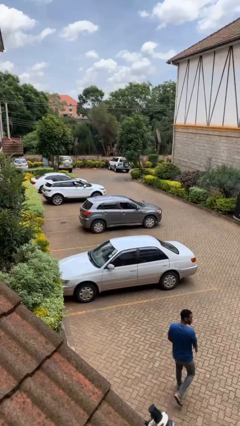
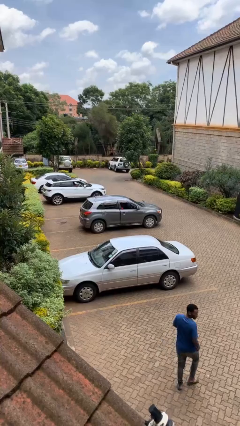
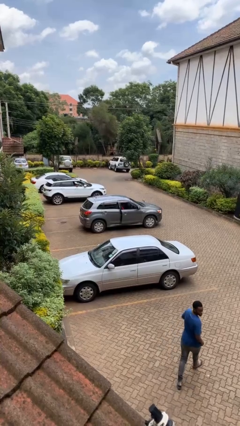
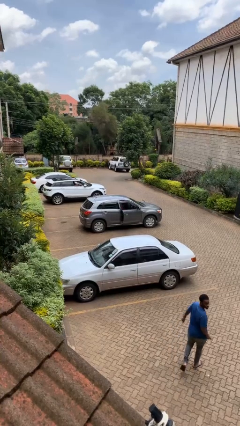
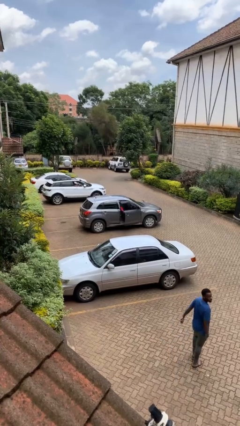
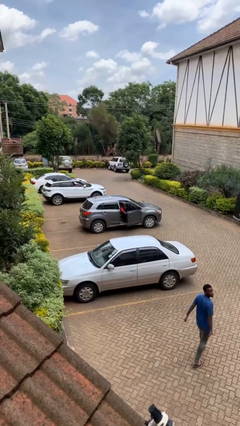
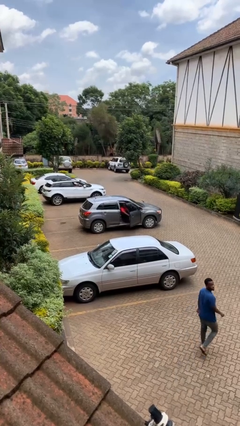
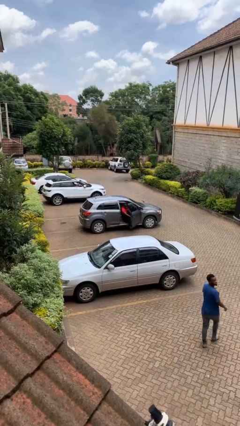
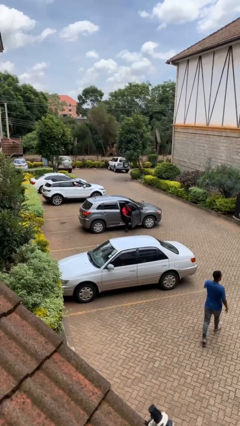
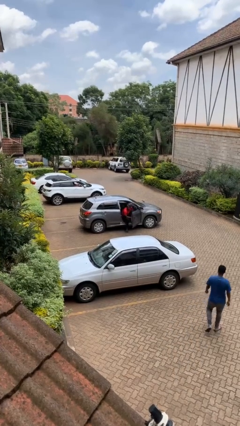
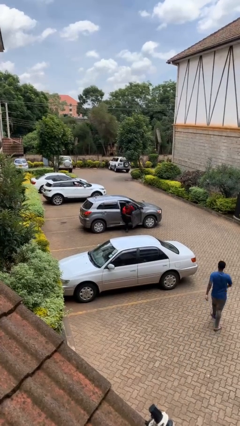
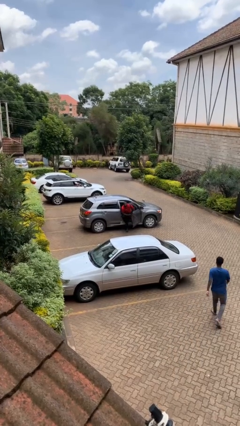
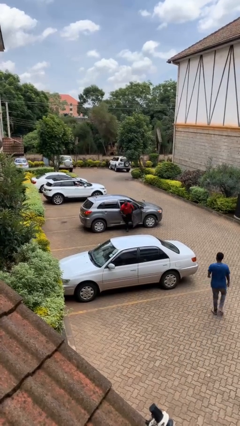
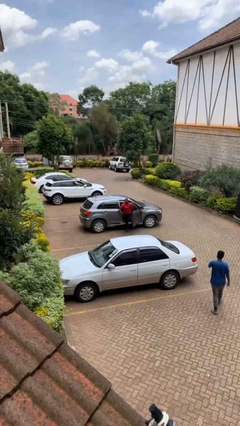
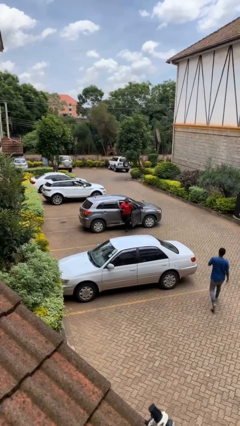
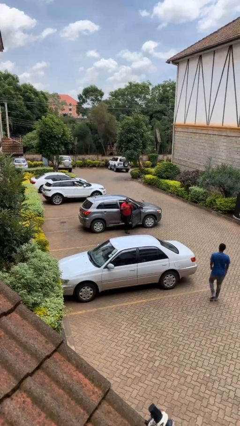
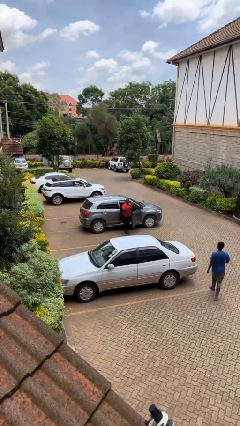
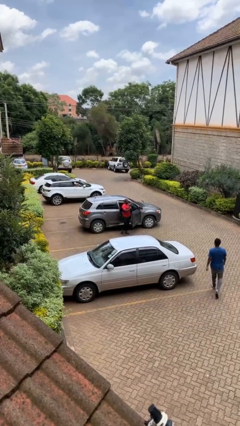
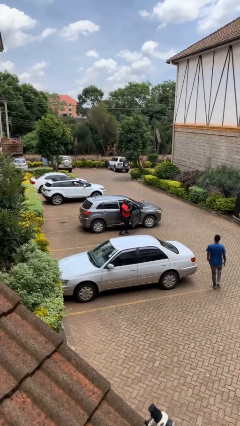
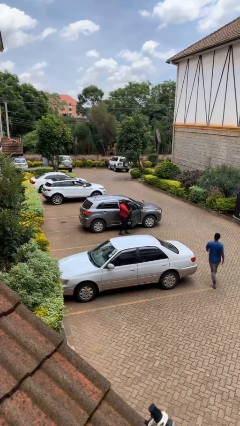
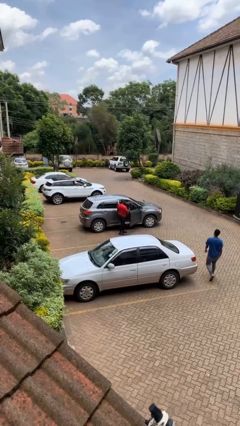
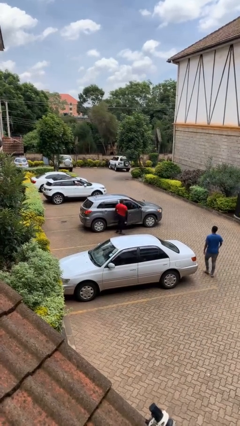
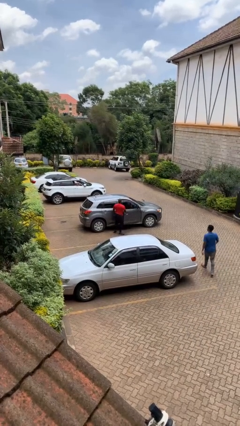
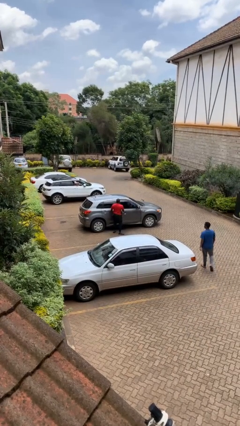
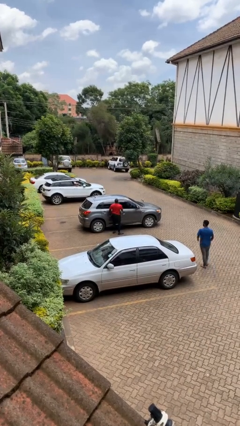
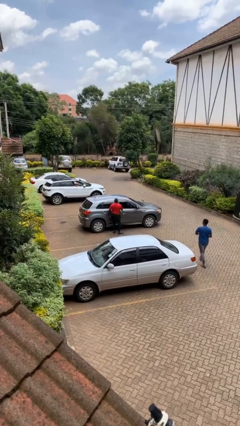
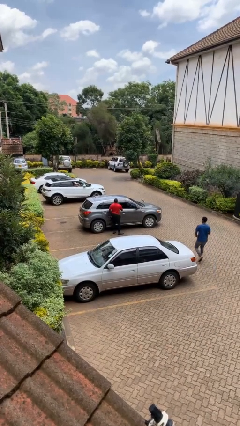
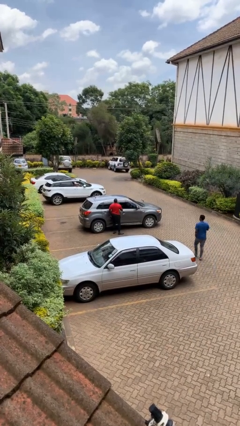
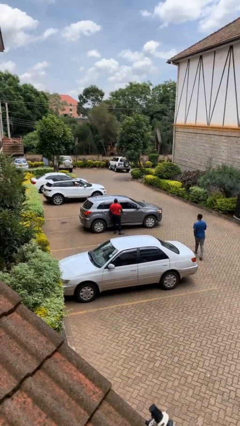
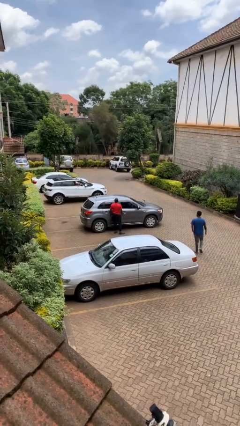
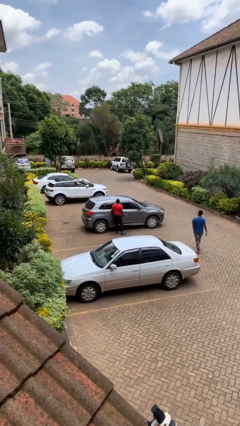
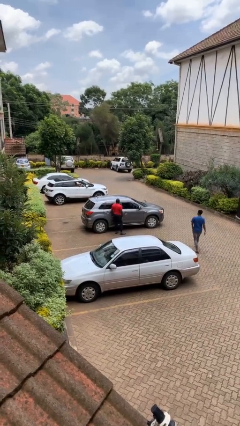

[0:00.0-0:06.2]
car drops off person

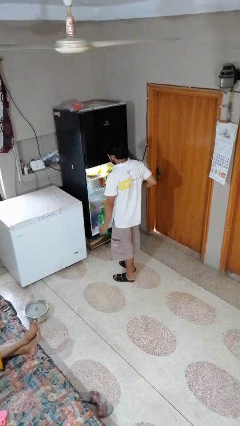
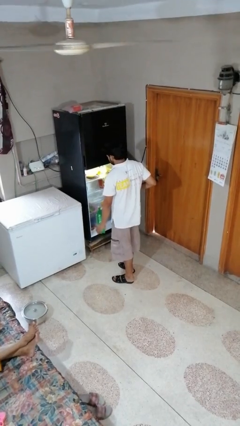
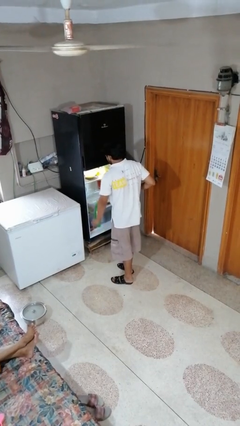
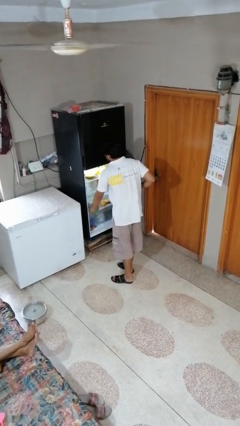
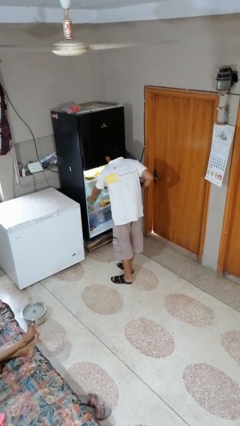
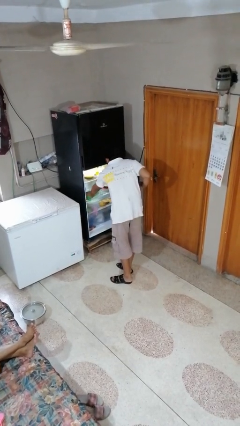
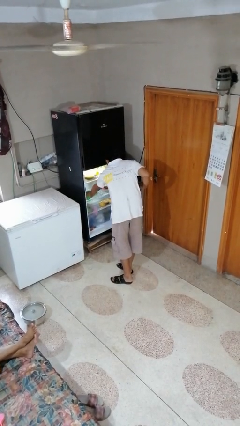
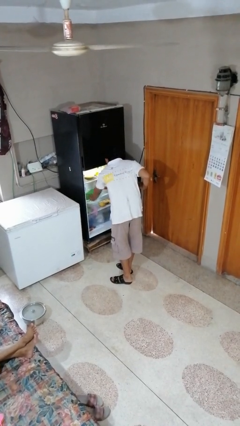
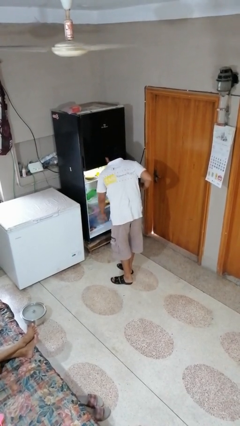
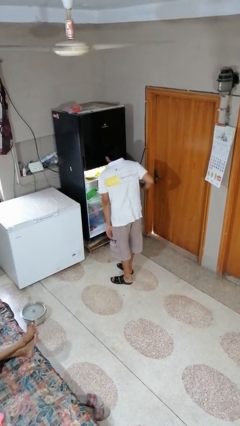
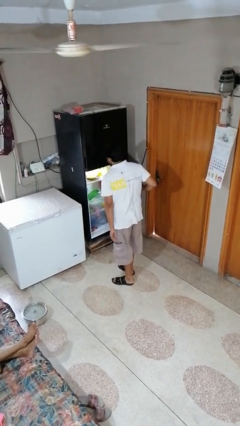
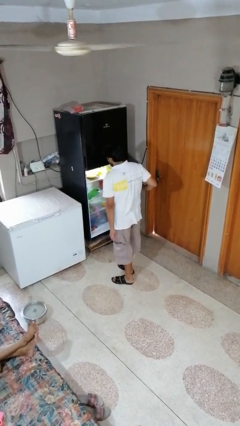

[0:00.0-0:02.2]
person puts object into refrigerator

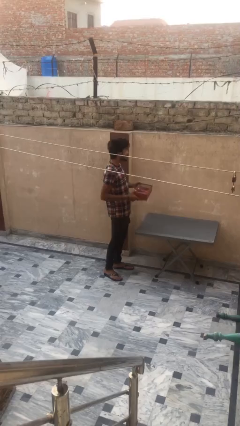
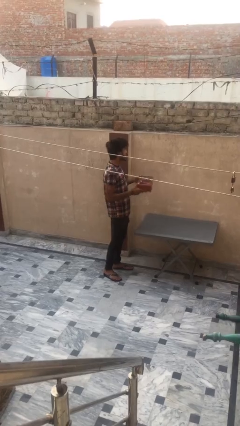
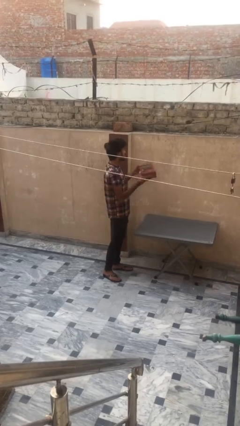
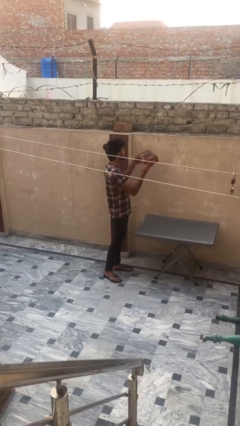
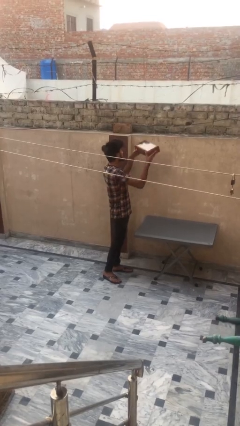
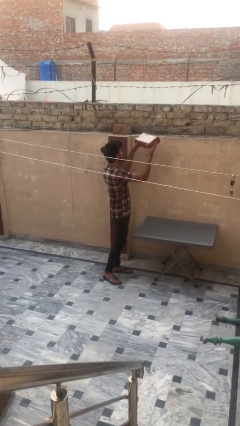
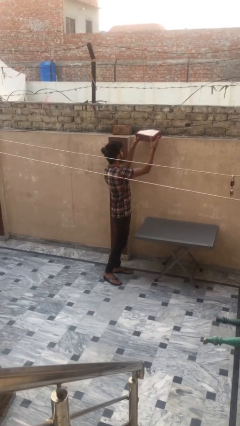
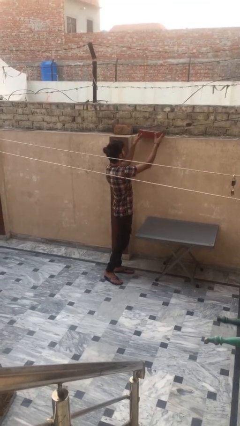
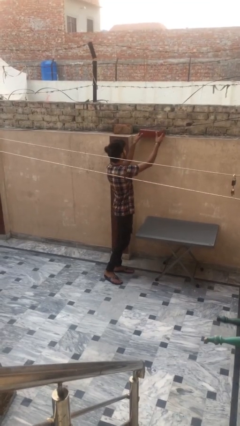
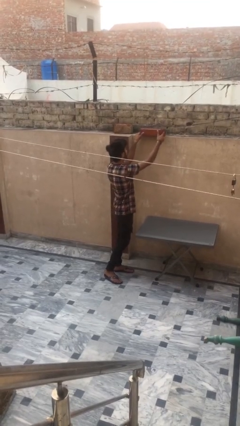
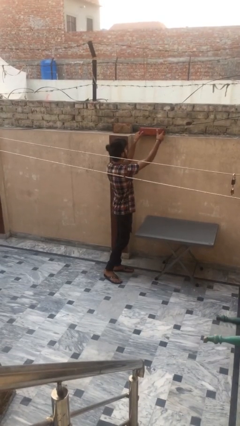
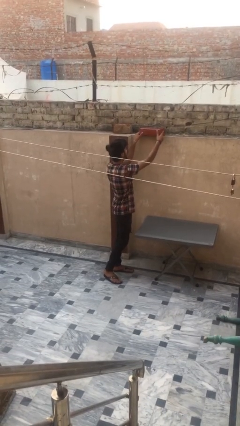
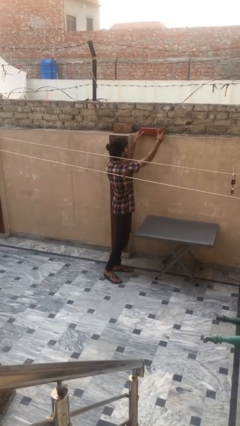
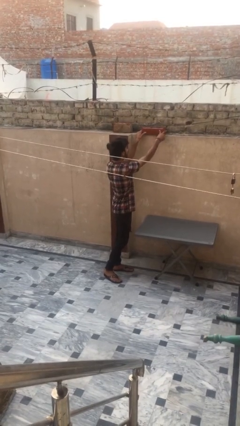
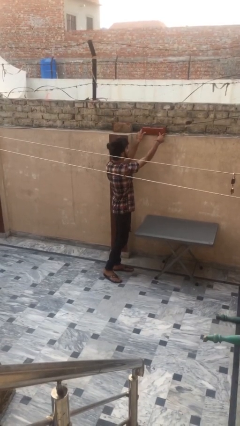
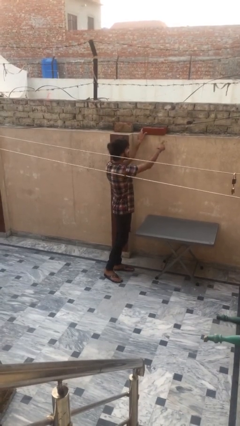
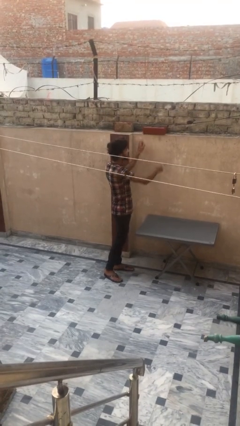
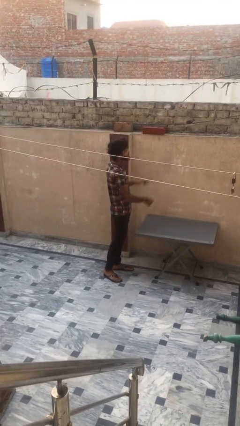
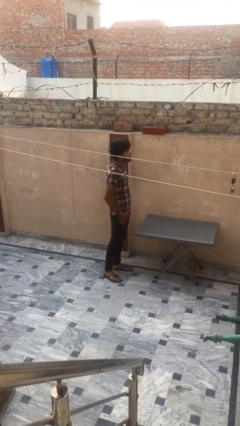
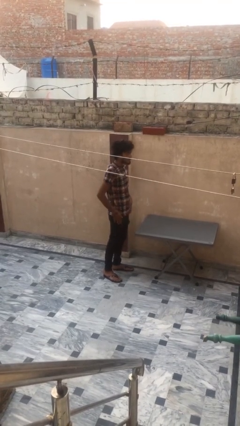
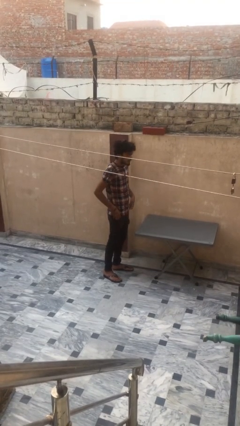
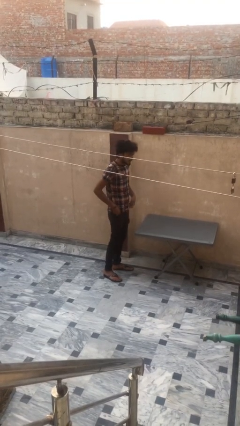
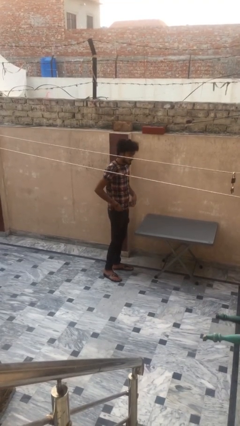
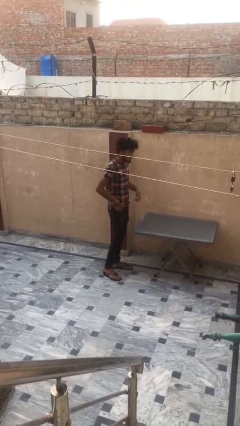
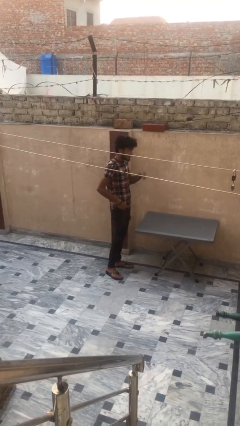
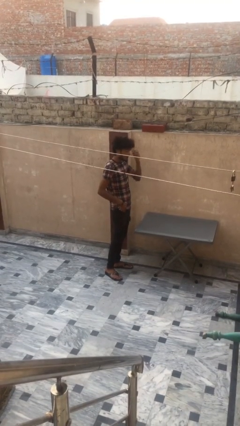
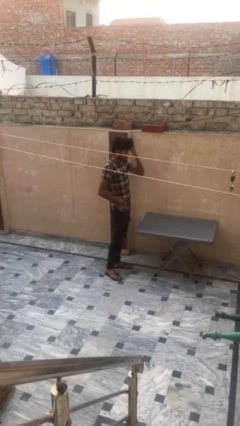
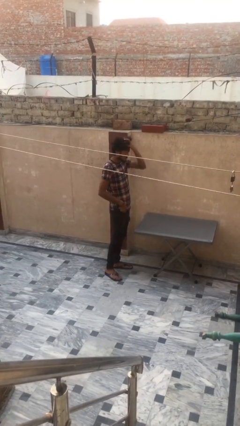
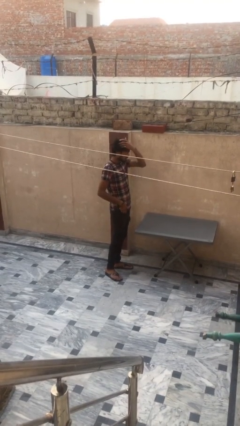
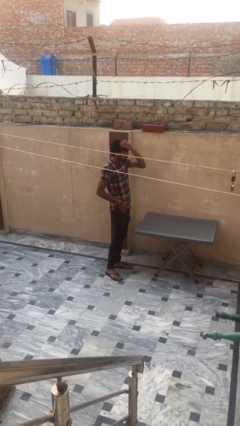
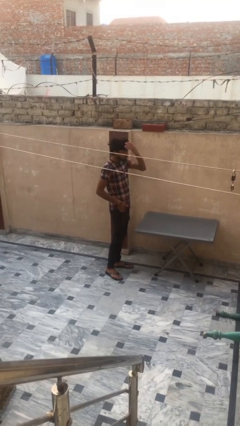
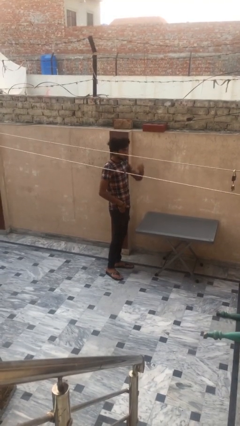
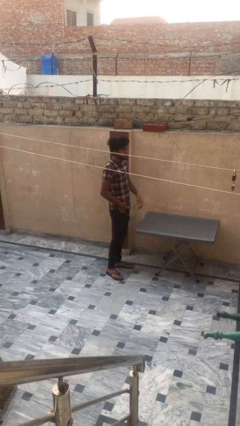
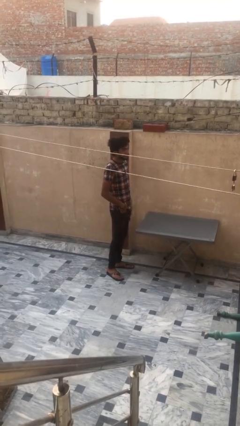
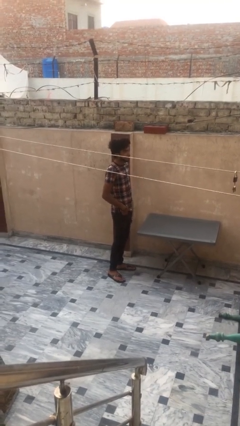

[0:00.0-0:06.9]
person puts down object on shelf

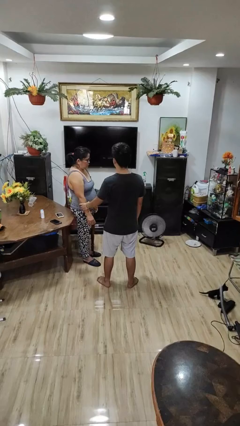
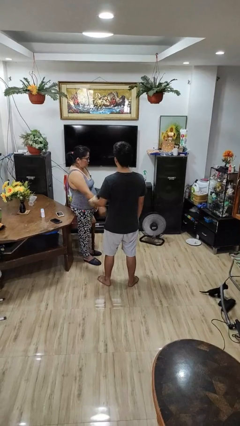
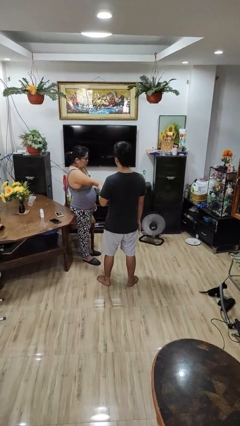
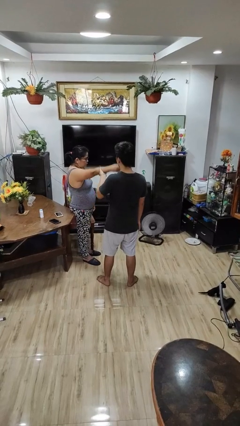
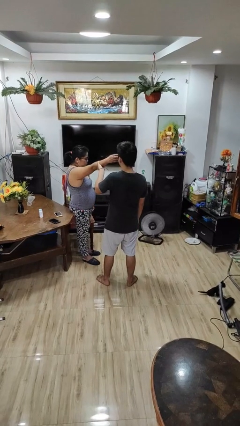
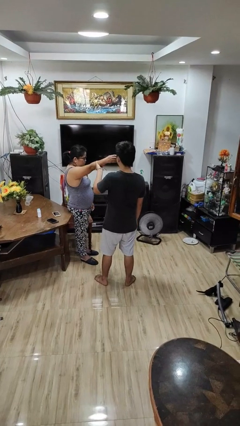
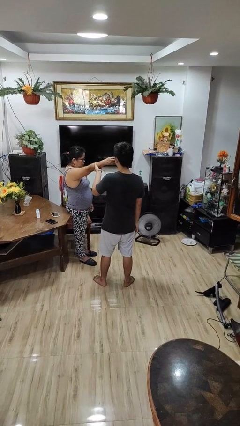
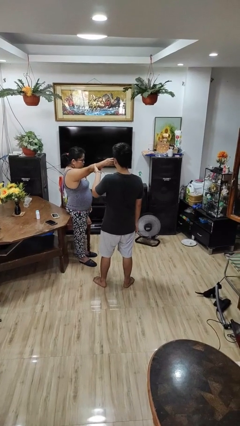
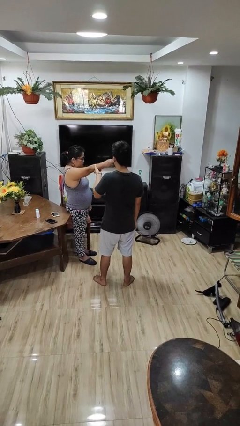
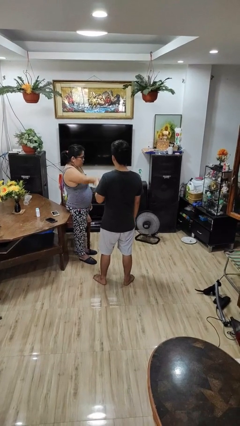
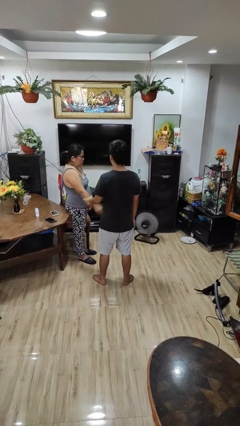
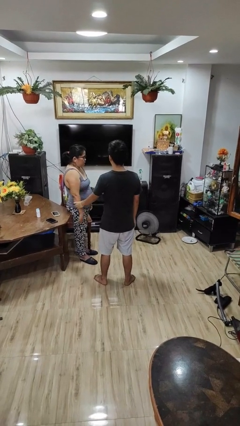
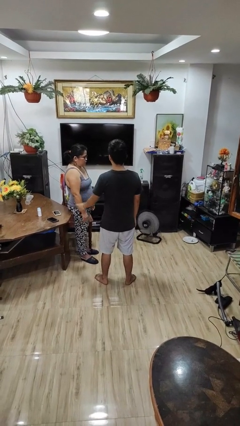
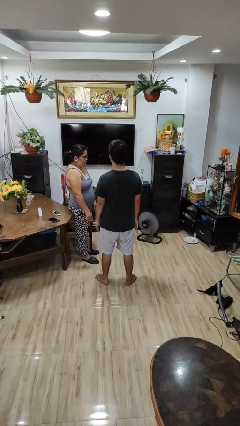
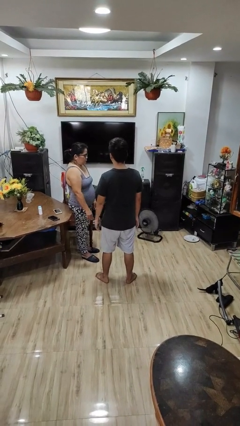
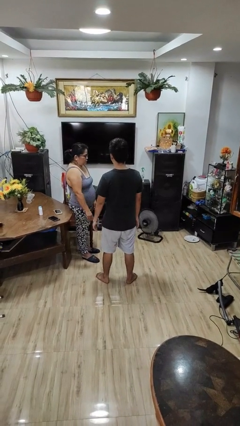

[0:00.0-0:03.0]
person grabs person by forearm
